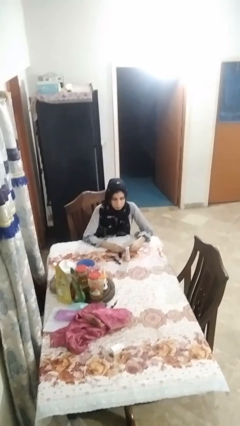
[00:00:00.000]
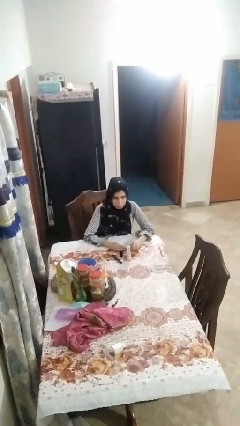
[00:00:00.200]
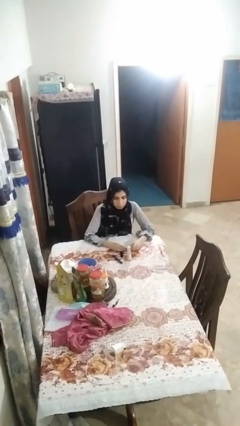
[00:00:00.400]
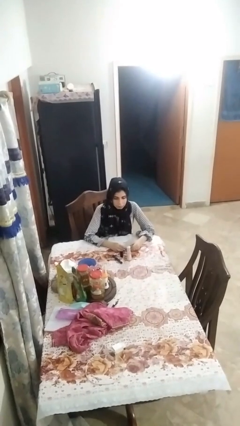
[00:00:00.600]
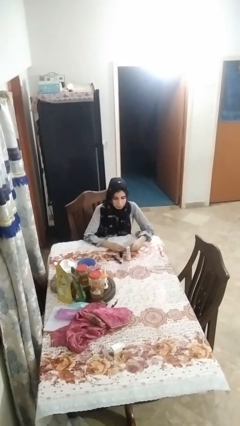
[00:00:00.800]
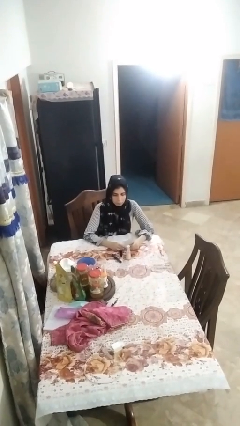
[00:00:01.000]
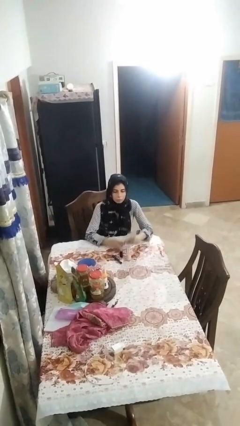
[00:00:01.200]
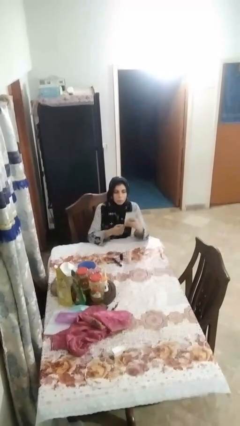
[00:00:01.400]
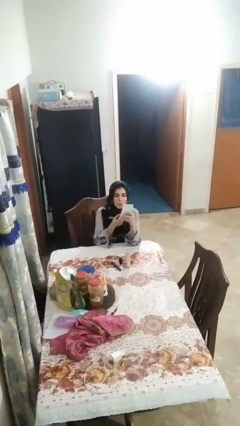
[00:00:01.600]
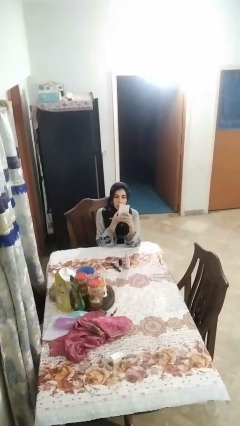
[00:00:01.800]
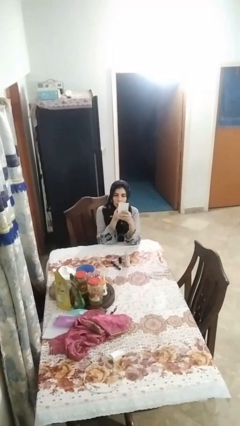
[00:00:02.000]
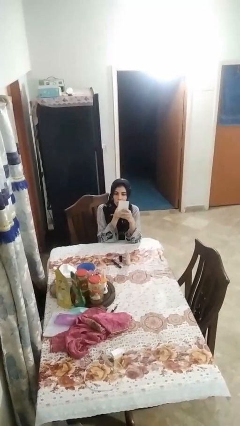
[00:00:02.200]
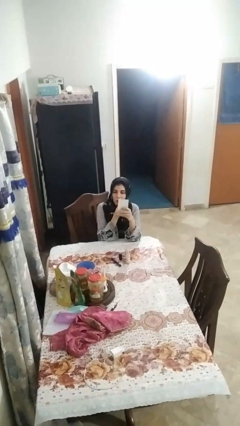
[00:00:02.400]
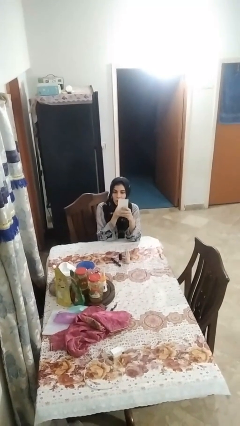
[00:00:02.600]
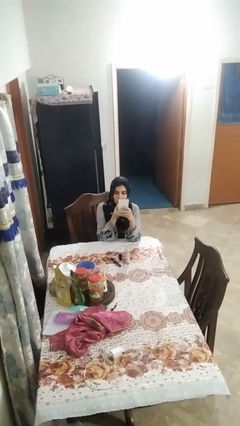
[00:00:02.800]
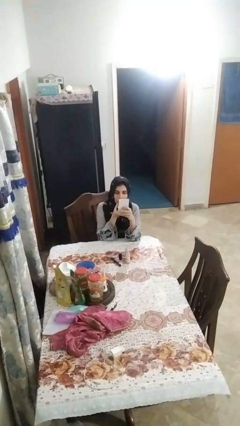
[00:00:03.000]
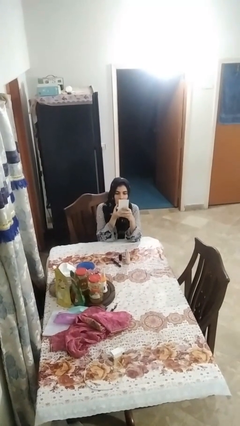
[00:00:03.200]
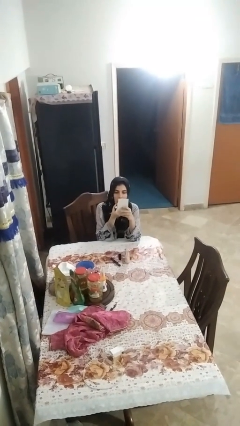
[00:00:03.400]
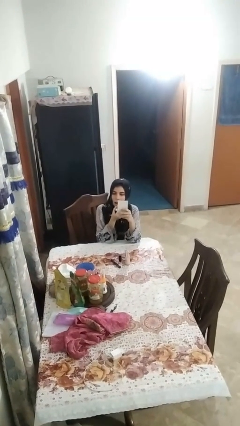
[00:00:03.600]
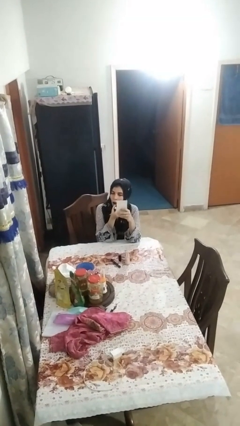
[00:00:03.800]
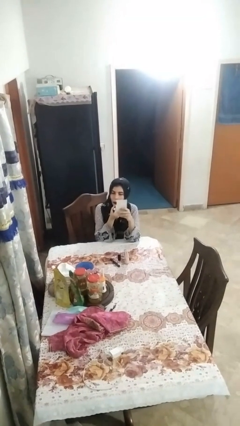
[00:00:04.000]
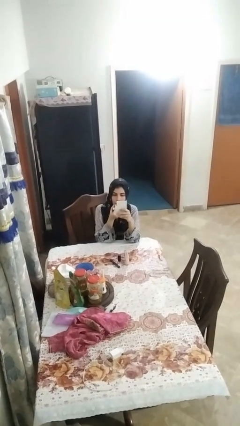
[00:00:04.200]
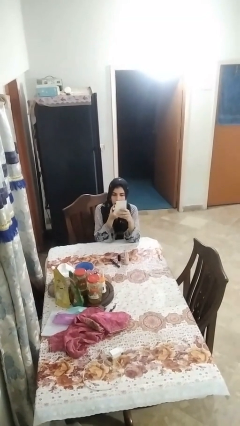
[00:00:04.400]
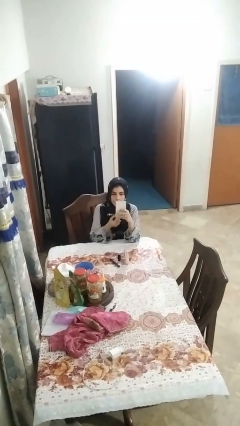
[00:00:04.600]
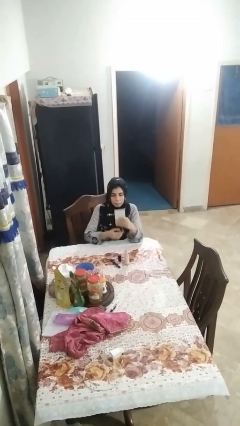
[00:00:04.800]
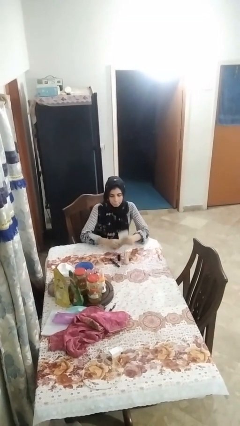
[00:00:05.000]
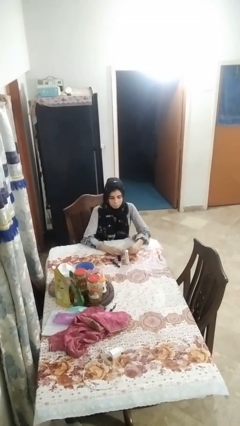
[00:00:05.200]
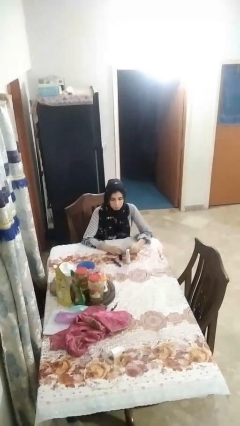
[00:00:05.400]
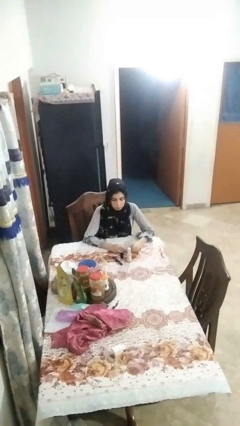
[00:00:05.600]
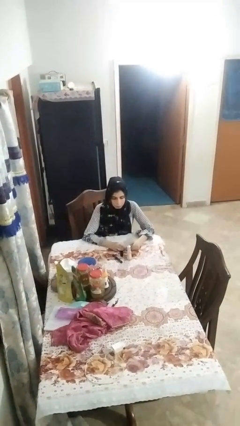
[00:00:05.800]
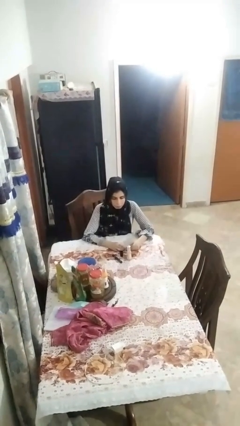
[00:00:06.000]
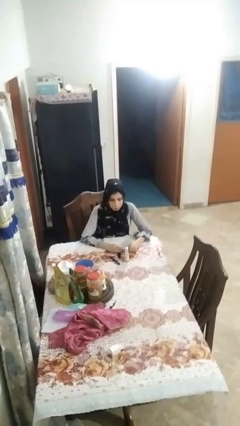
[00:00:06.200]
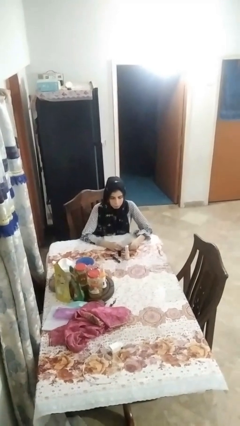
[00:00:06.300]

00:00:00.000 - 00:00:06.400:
person applies lip makeup

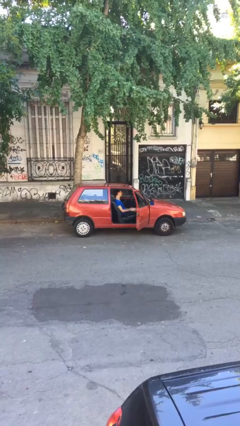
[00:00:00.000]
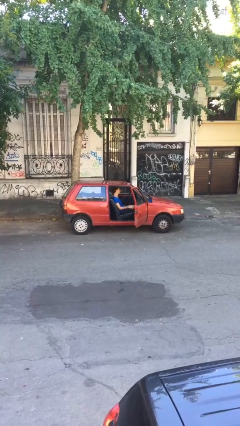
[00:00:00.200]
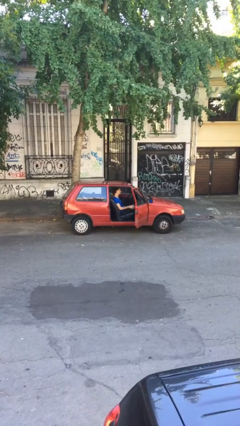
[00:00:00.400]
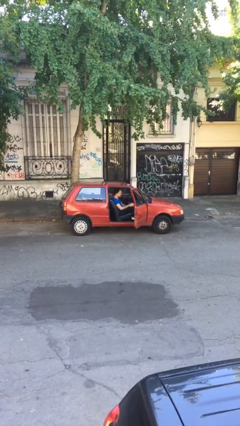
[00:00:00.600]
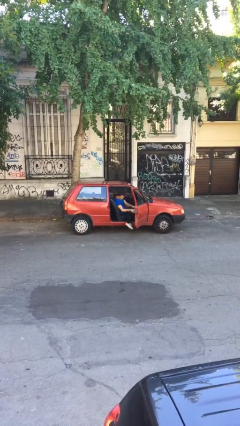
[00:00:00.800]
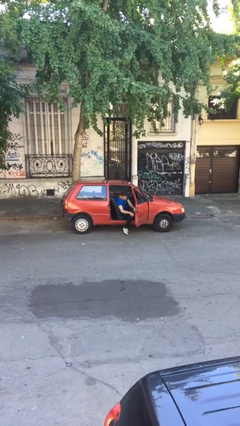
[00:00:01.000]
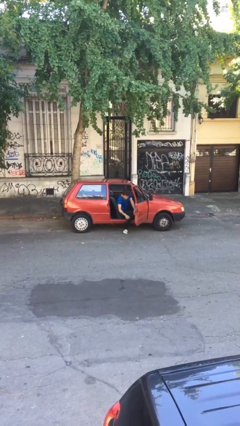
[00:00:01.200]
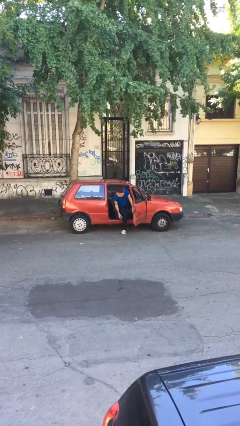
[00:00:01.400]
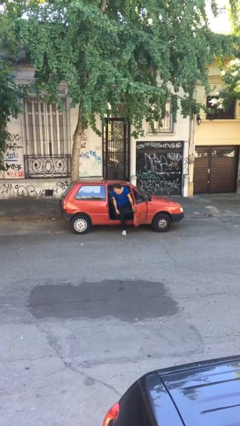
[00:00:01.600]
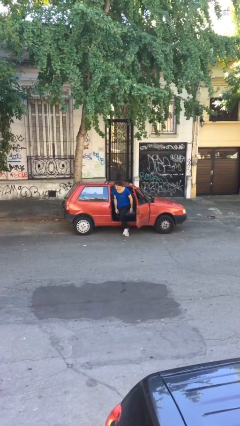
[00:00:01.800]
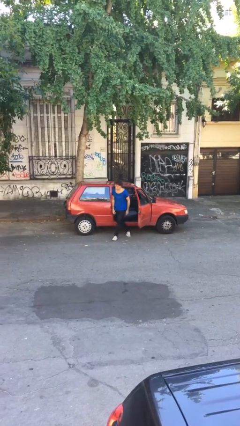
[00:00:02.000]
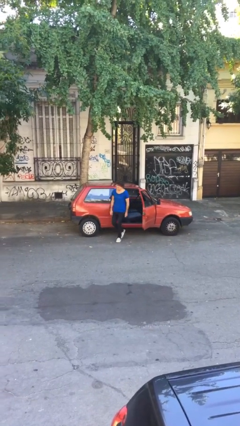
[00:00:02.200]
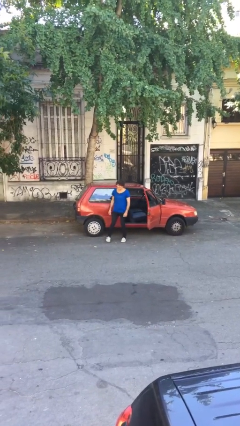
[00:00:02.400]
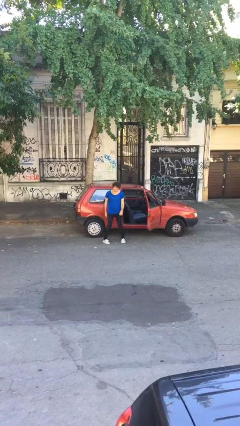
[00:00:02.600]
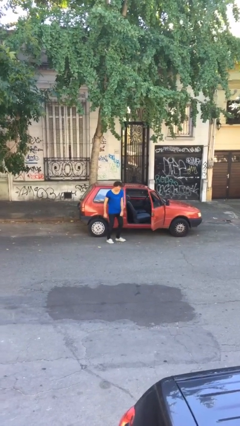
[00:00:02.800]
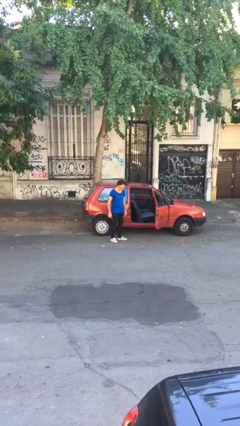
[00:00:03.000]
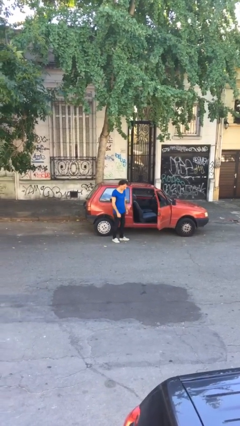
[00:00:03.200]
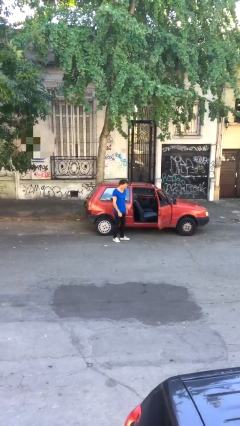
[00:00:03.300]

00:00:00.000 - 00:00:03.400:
person exits car

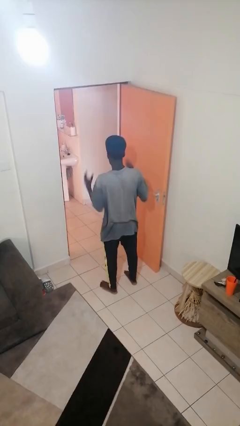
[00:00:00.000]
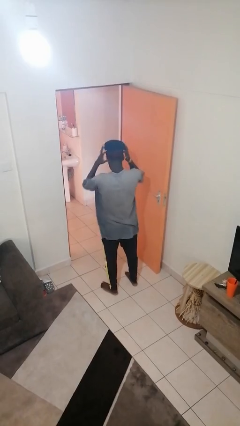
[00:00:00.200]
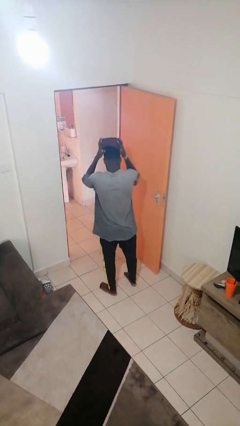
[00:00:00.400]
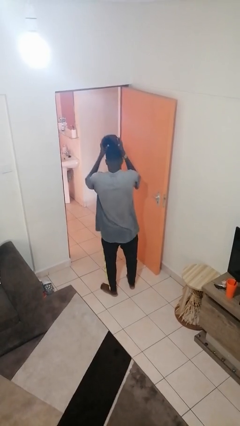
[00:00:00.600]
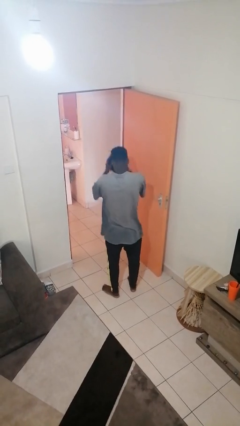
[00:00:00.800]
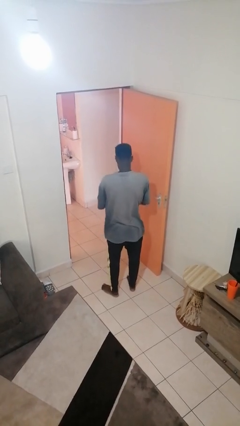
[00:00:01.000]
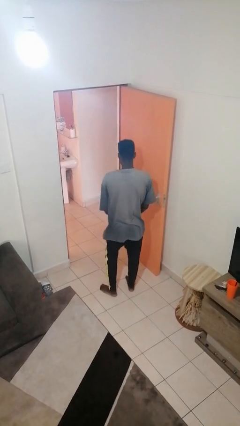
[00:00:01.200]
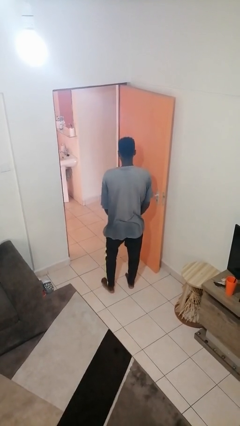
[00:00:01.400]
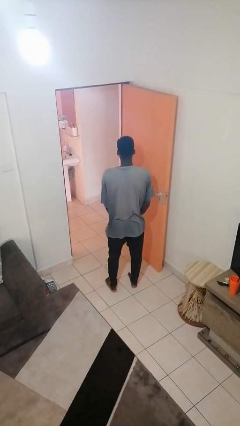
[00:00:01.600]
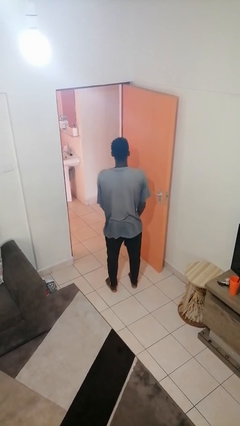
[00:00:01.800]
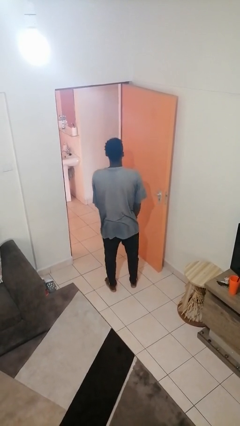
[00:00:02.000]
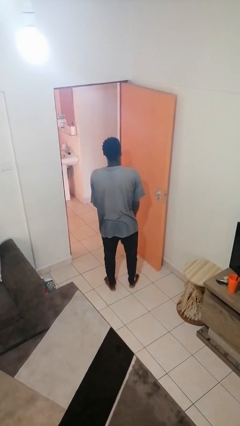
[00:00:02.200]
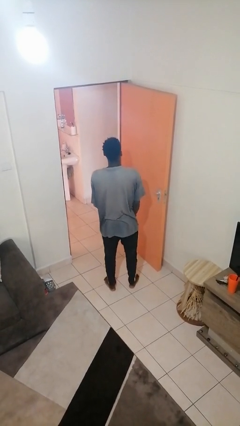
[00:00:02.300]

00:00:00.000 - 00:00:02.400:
person takes off hat

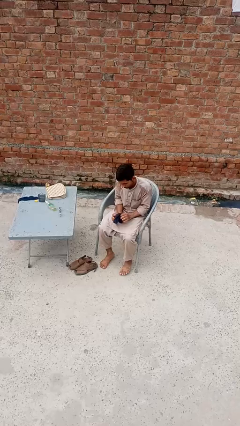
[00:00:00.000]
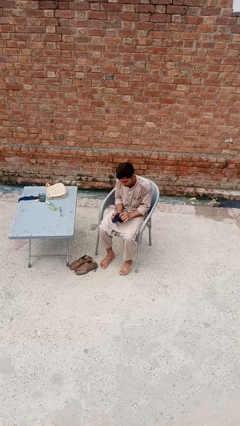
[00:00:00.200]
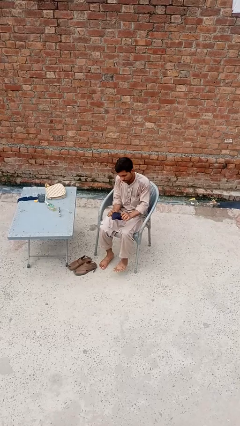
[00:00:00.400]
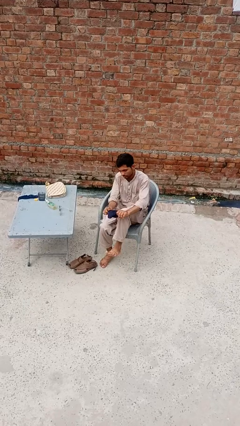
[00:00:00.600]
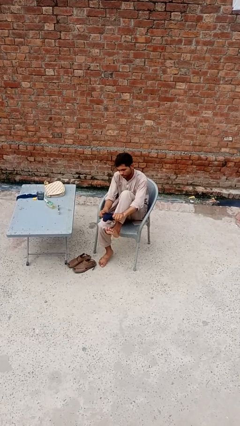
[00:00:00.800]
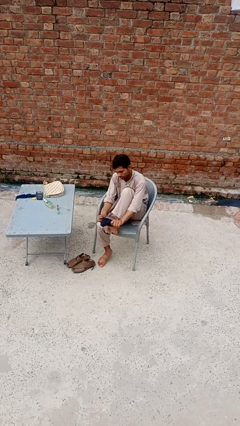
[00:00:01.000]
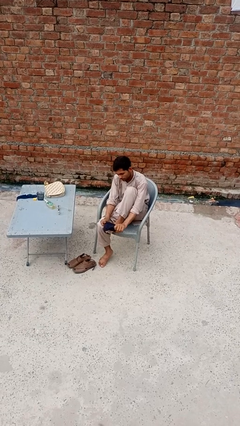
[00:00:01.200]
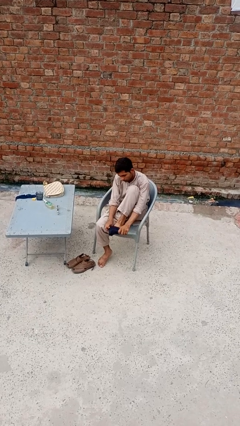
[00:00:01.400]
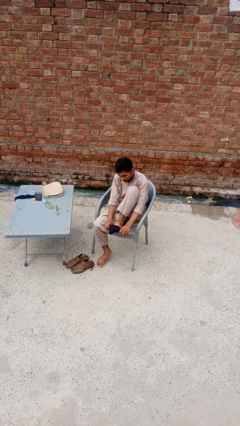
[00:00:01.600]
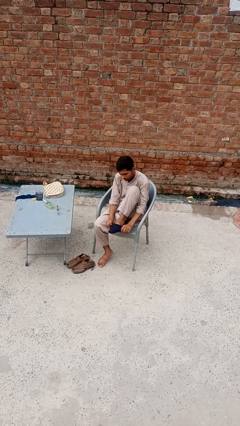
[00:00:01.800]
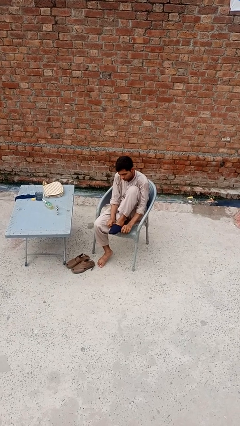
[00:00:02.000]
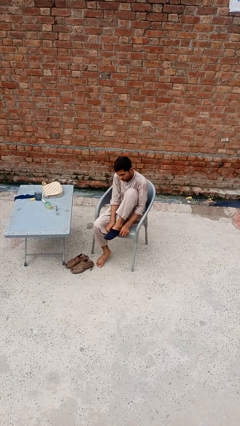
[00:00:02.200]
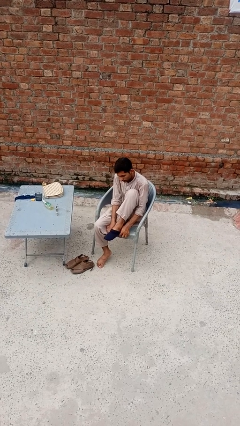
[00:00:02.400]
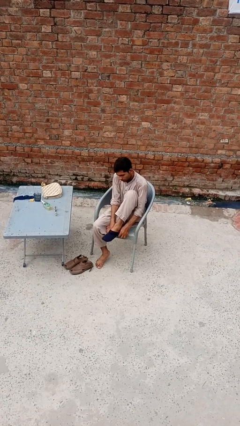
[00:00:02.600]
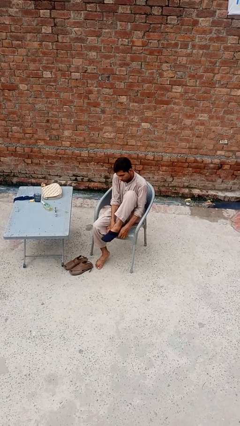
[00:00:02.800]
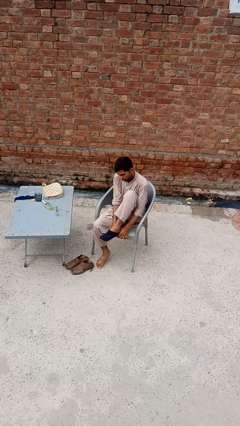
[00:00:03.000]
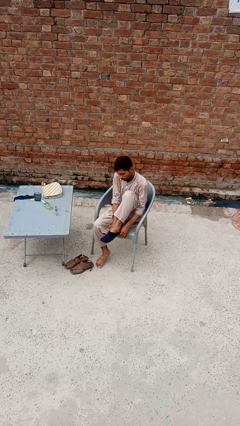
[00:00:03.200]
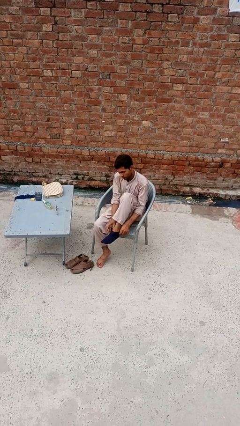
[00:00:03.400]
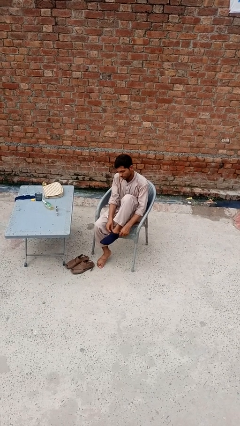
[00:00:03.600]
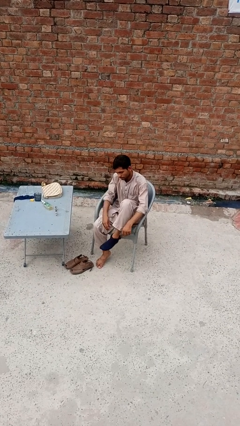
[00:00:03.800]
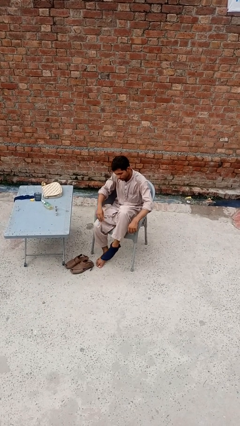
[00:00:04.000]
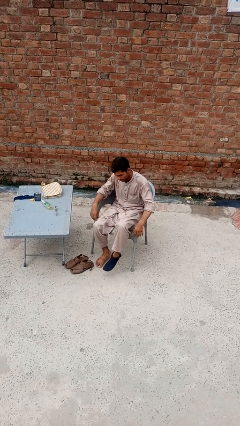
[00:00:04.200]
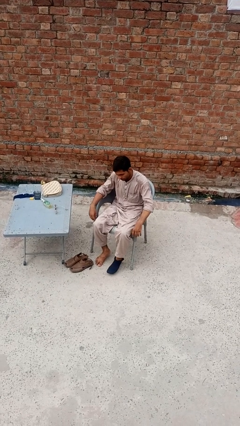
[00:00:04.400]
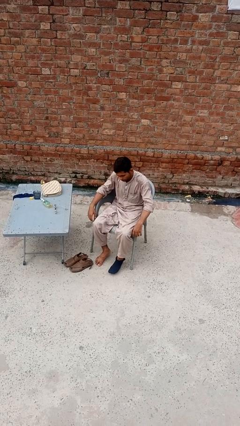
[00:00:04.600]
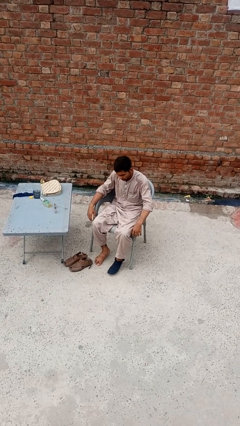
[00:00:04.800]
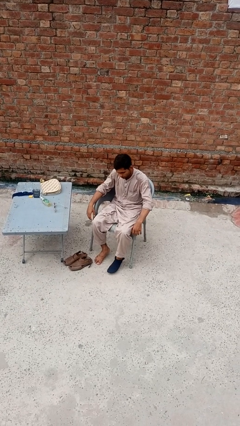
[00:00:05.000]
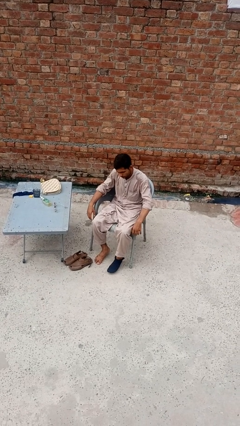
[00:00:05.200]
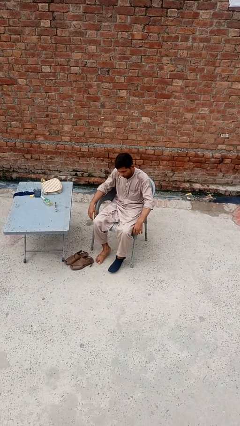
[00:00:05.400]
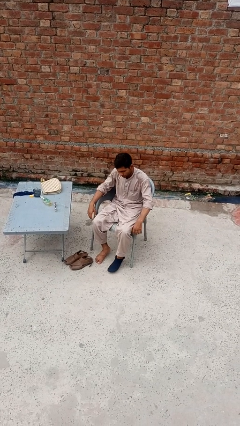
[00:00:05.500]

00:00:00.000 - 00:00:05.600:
person puts on socks
